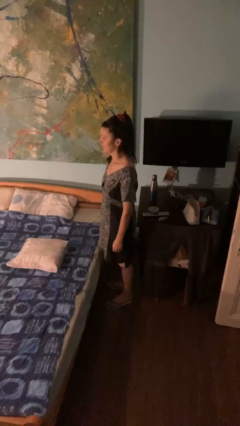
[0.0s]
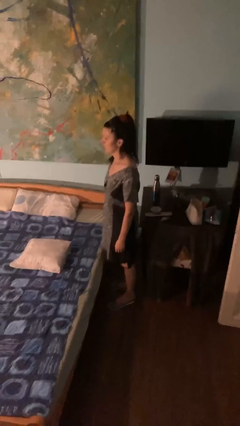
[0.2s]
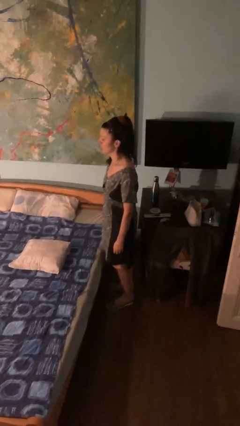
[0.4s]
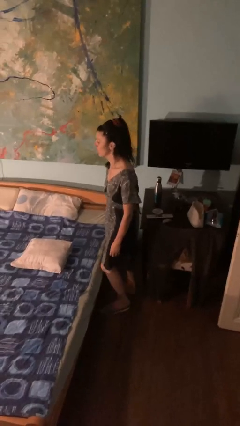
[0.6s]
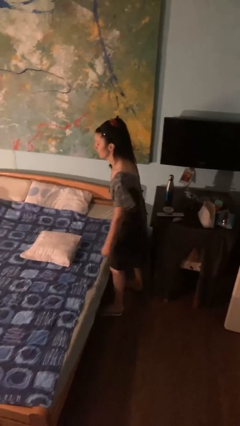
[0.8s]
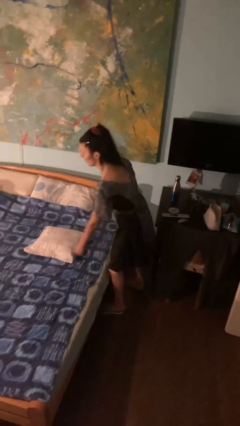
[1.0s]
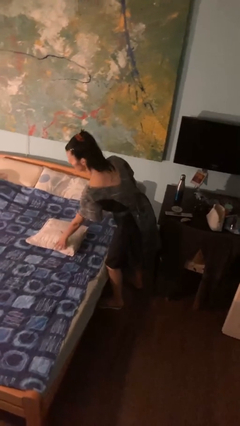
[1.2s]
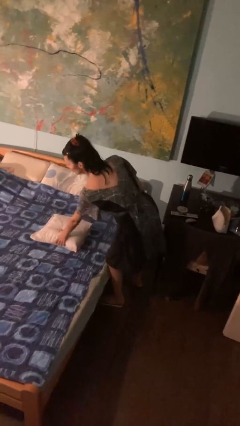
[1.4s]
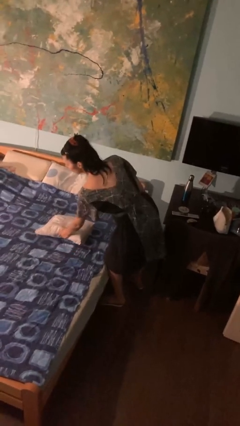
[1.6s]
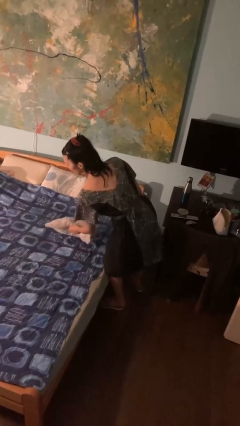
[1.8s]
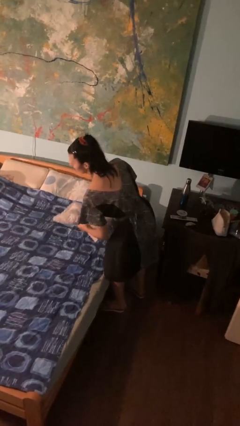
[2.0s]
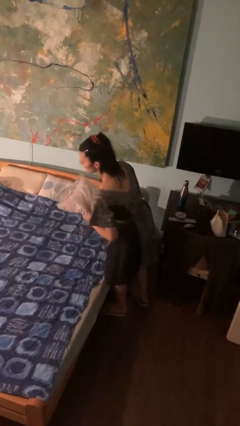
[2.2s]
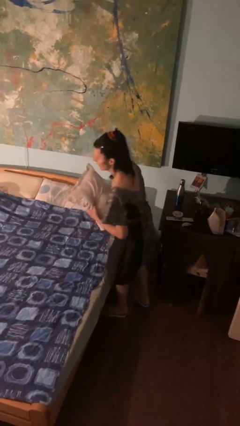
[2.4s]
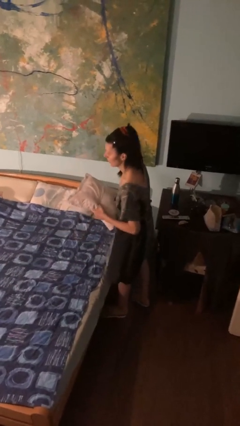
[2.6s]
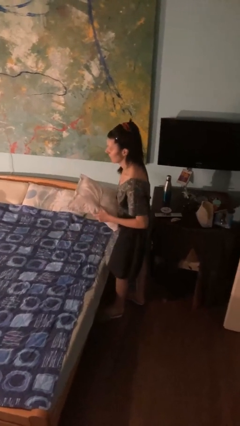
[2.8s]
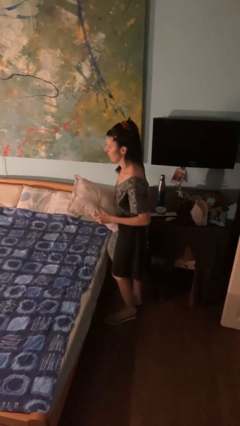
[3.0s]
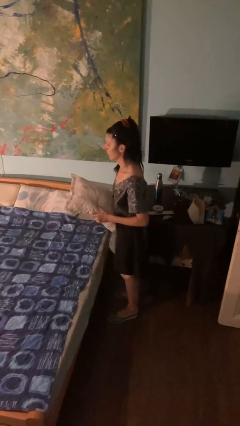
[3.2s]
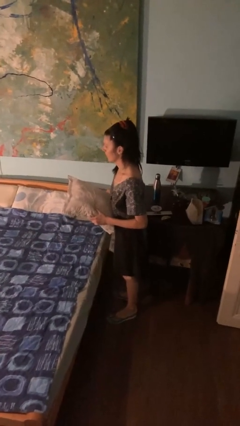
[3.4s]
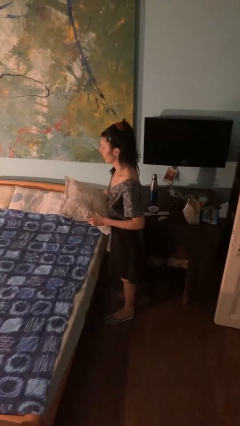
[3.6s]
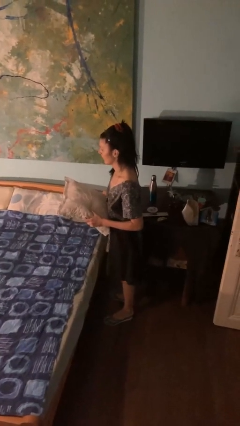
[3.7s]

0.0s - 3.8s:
person picks up object from bed

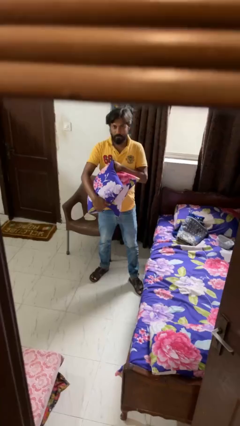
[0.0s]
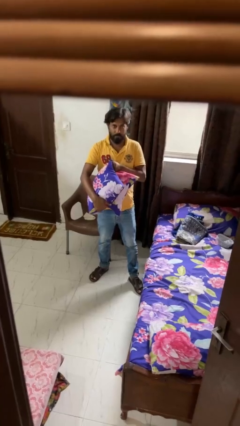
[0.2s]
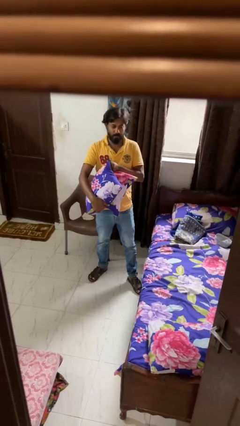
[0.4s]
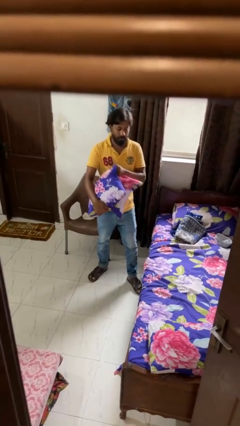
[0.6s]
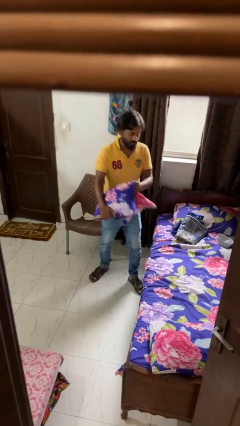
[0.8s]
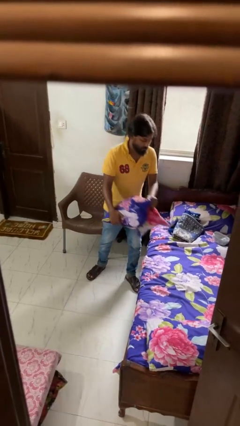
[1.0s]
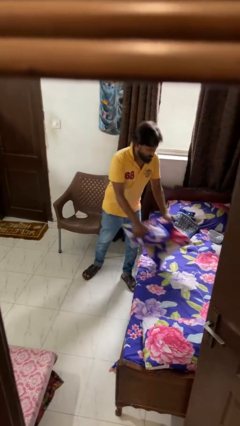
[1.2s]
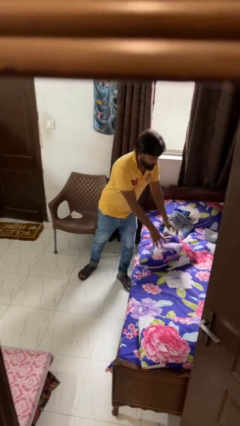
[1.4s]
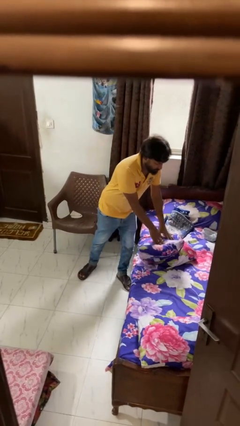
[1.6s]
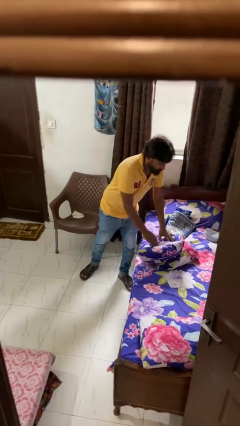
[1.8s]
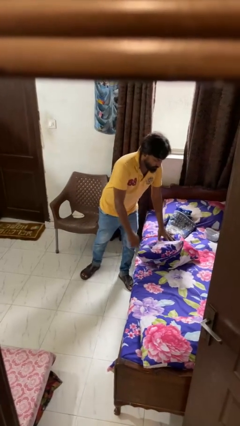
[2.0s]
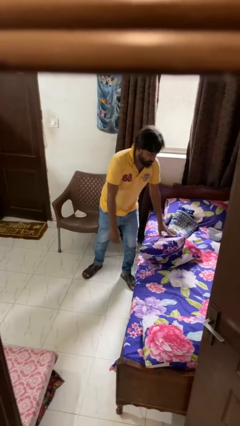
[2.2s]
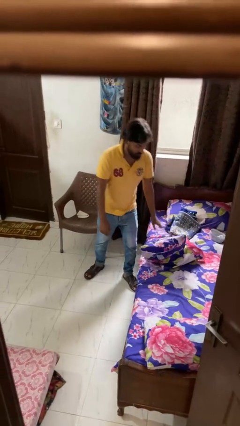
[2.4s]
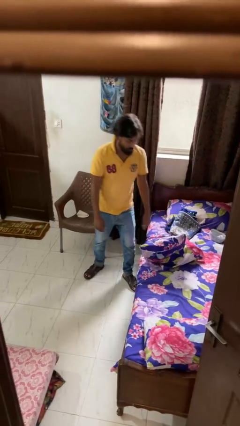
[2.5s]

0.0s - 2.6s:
person puts down object on bed

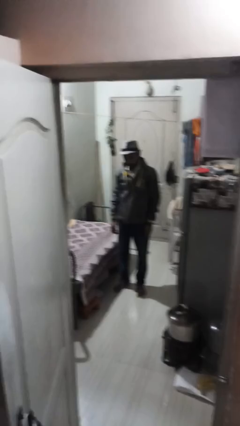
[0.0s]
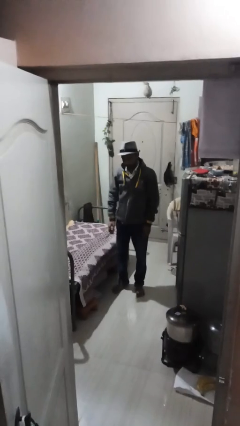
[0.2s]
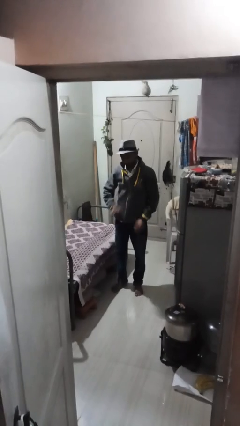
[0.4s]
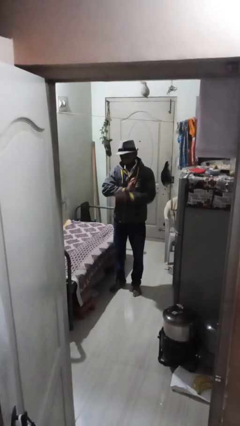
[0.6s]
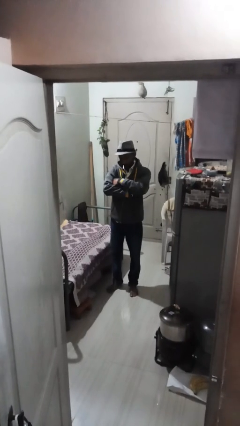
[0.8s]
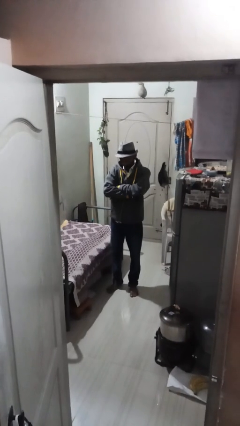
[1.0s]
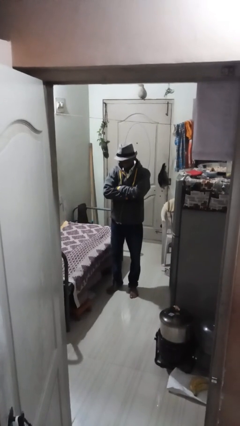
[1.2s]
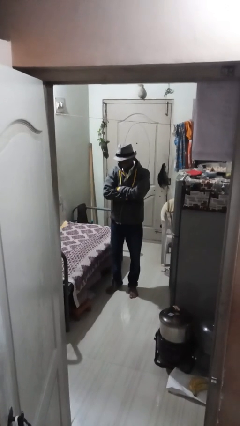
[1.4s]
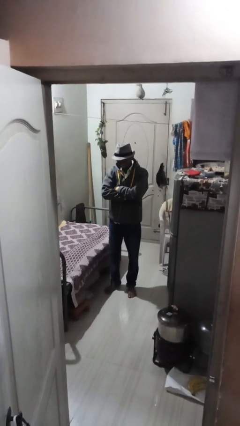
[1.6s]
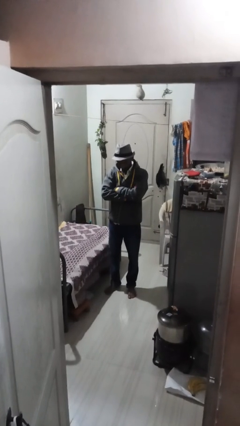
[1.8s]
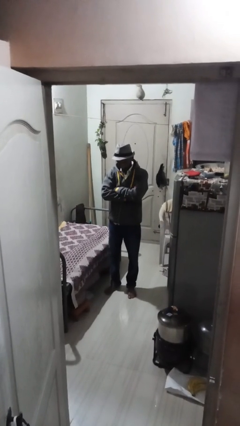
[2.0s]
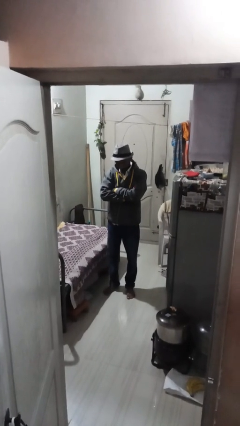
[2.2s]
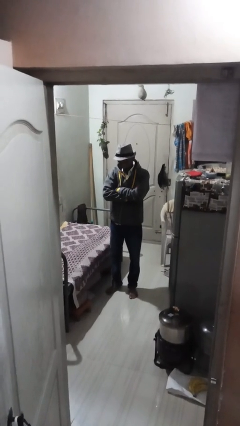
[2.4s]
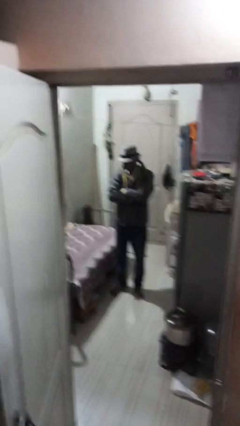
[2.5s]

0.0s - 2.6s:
person crosses arms

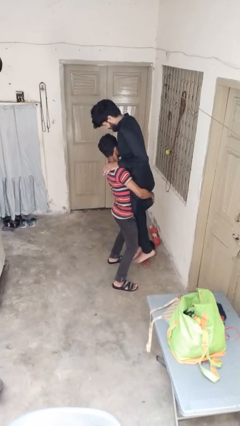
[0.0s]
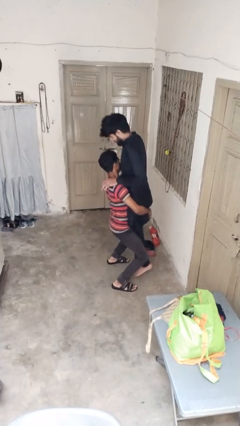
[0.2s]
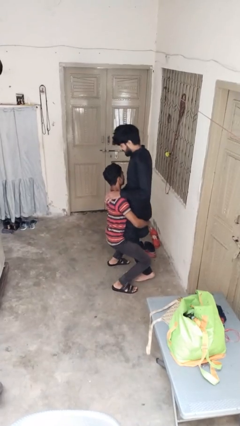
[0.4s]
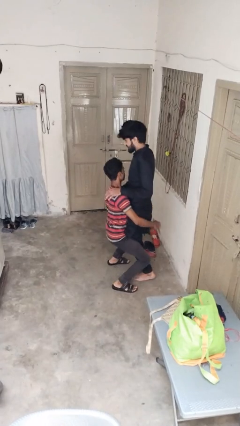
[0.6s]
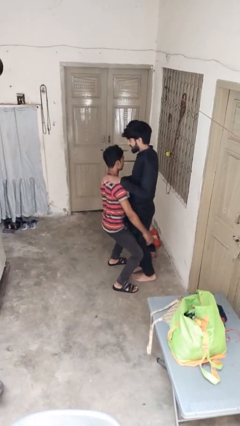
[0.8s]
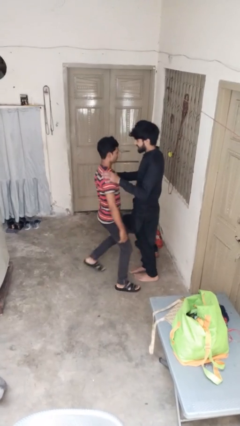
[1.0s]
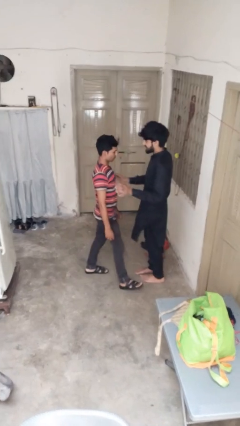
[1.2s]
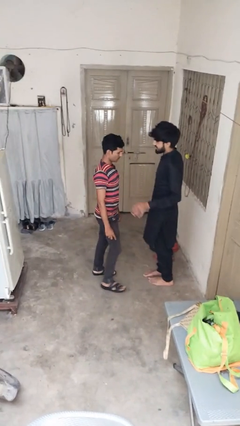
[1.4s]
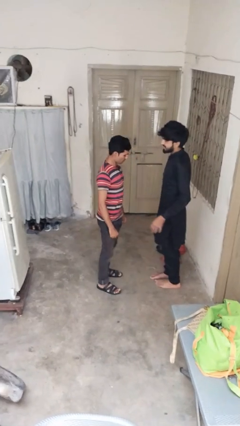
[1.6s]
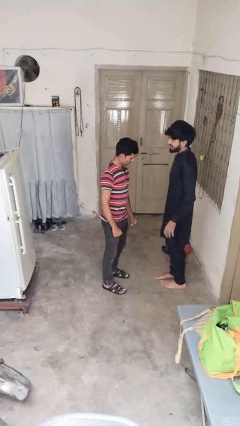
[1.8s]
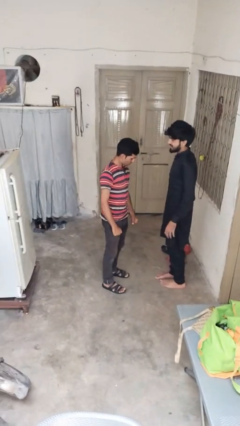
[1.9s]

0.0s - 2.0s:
person puts down person

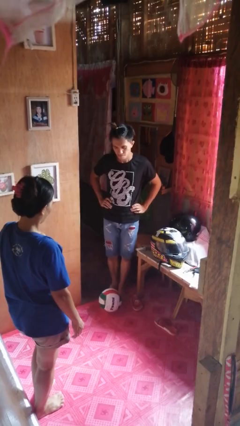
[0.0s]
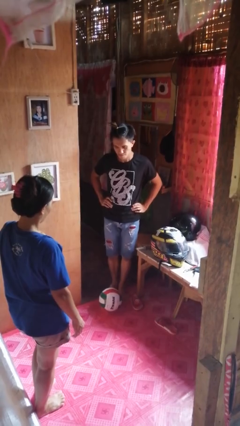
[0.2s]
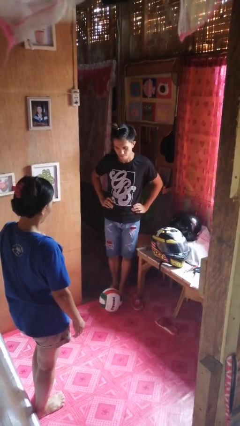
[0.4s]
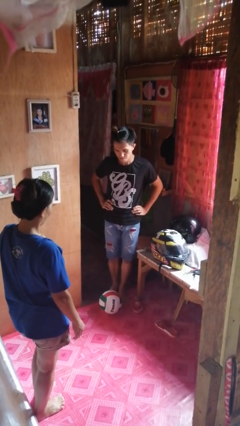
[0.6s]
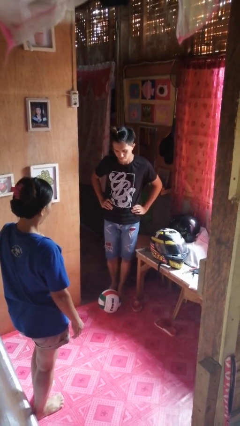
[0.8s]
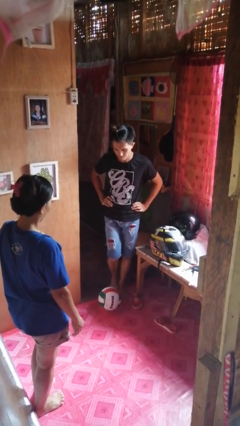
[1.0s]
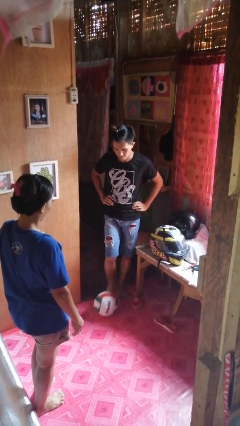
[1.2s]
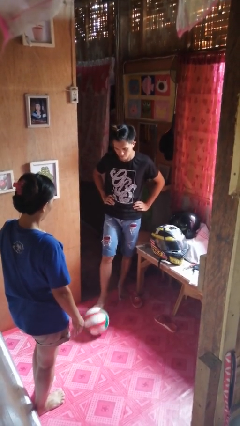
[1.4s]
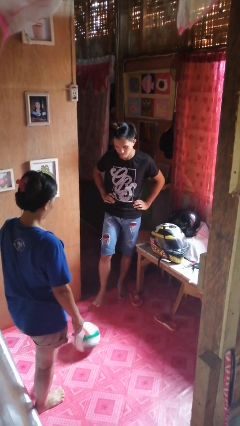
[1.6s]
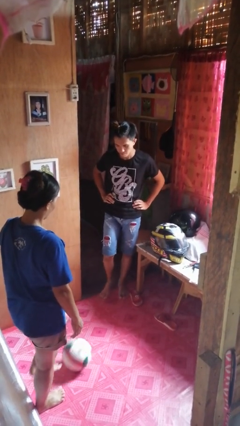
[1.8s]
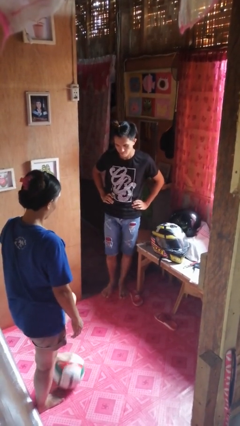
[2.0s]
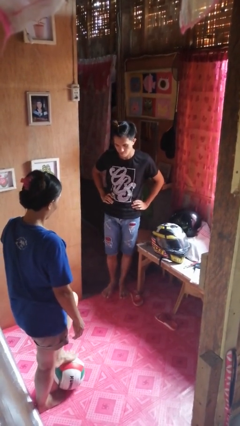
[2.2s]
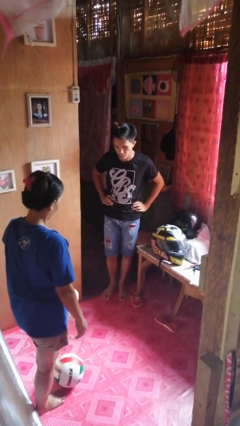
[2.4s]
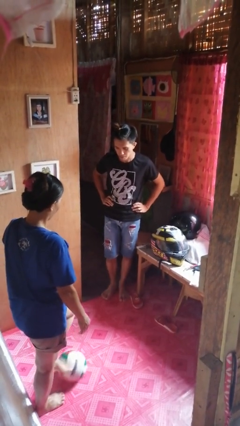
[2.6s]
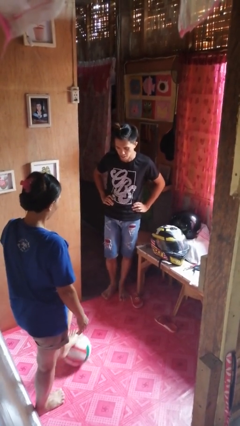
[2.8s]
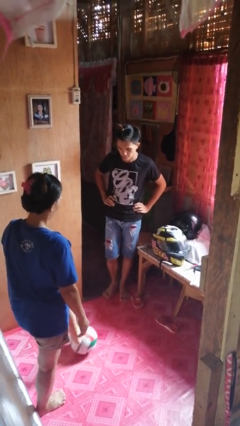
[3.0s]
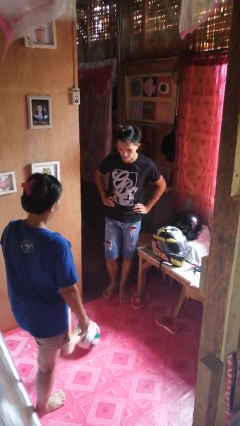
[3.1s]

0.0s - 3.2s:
person kicks object to person

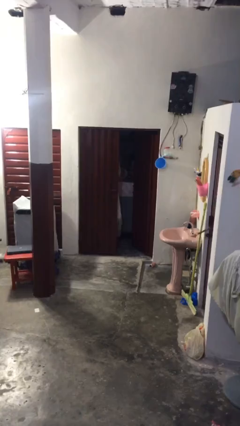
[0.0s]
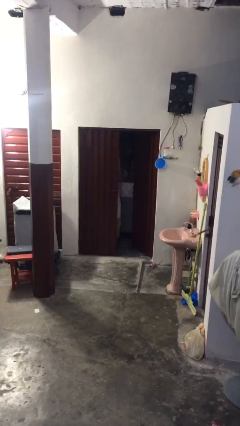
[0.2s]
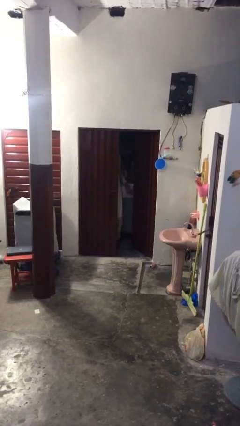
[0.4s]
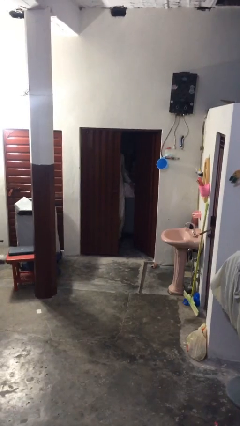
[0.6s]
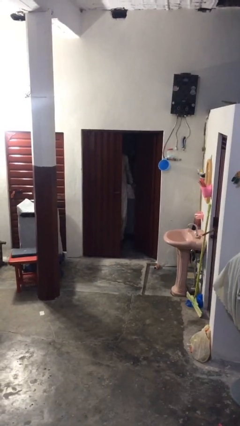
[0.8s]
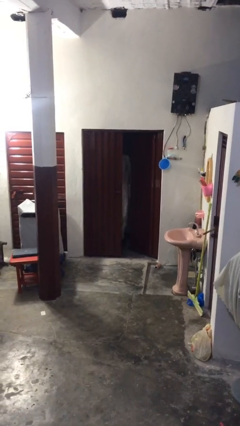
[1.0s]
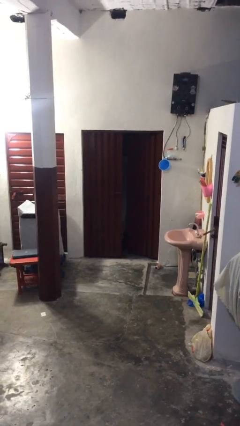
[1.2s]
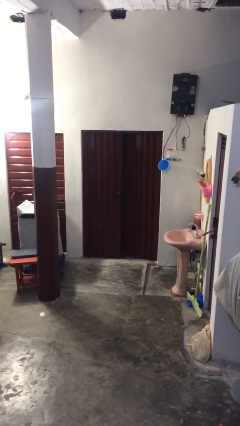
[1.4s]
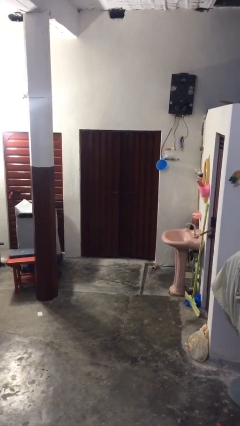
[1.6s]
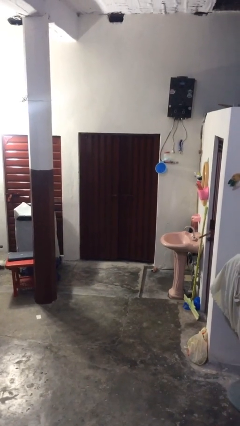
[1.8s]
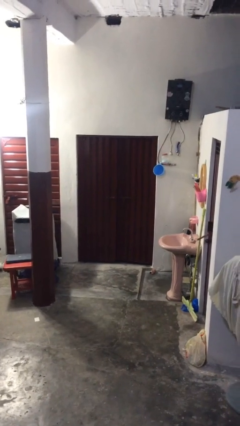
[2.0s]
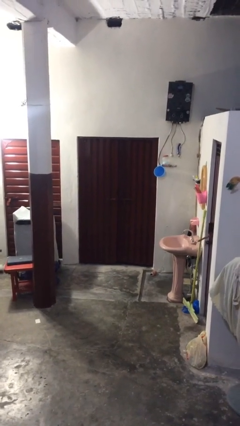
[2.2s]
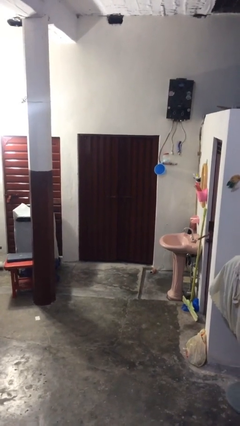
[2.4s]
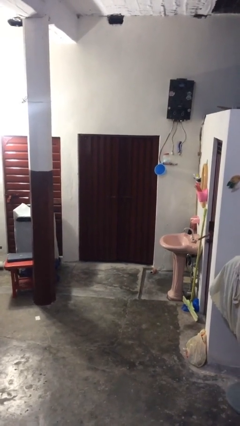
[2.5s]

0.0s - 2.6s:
person closes facility door

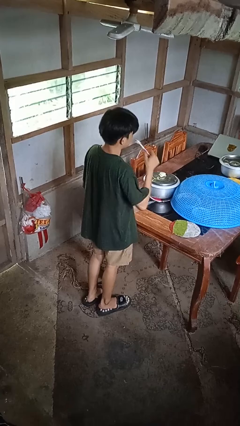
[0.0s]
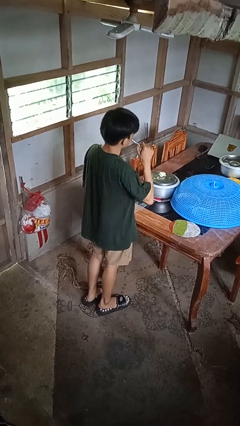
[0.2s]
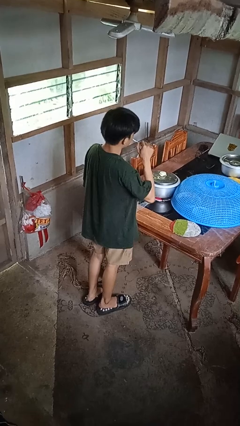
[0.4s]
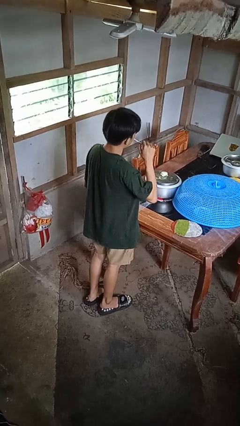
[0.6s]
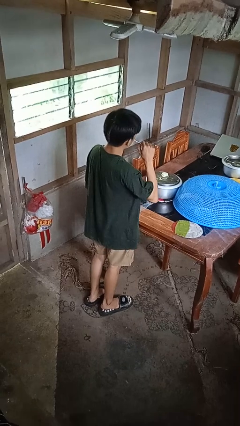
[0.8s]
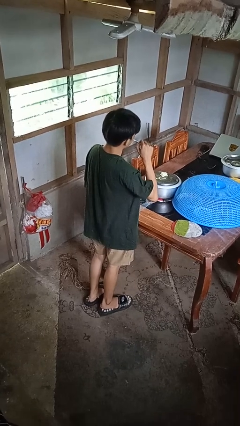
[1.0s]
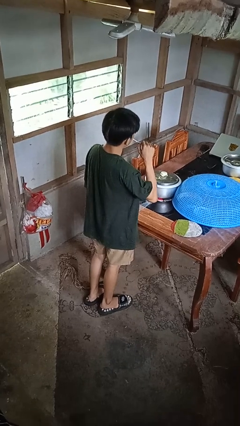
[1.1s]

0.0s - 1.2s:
person brushes teeth
